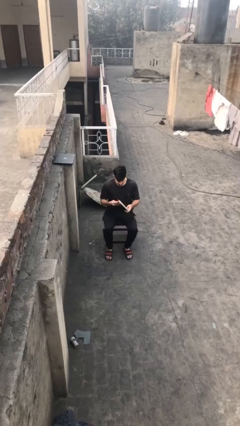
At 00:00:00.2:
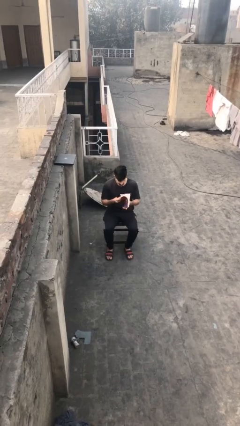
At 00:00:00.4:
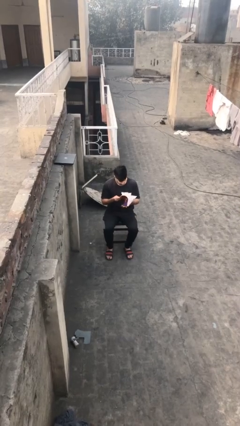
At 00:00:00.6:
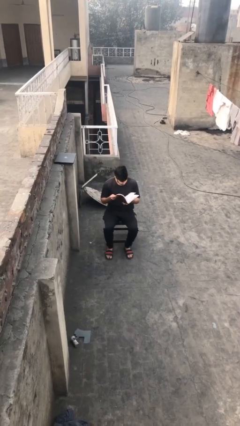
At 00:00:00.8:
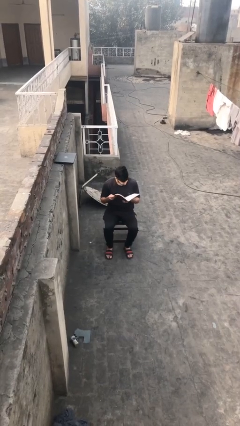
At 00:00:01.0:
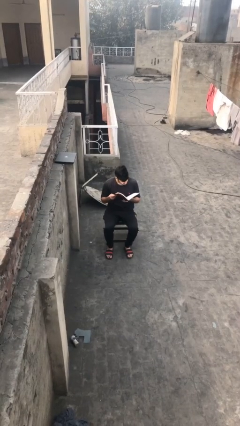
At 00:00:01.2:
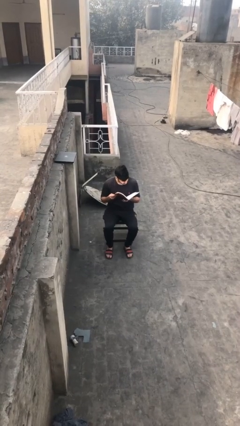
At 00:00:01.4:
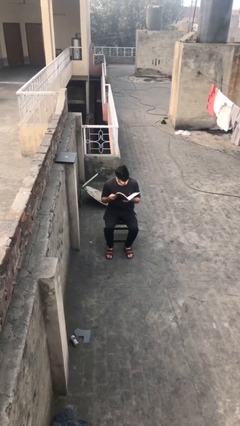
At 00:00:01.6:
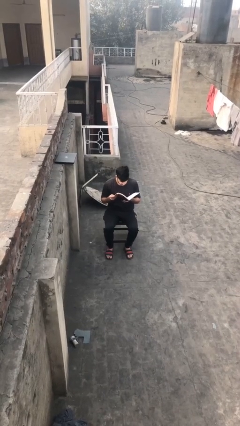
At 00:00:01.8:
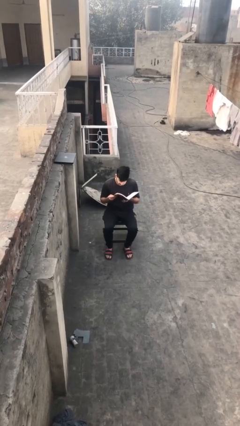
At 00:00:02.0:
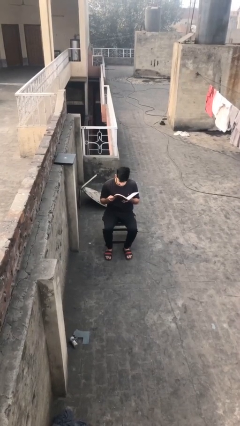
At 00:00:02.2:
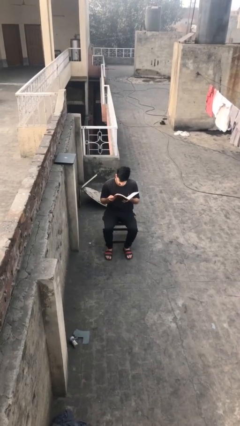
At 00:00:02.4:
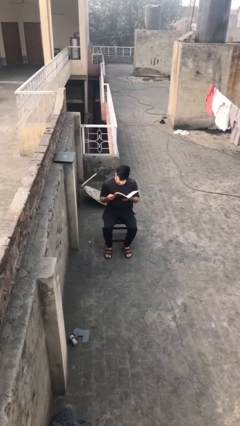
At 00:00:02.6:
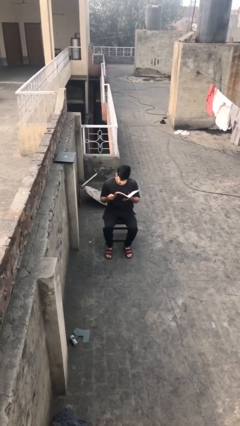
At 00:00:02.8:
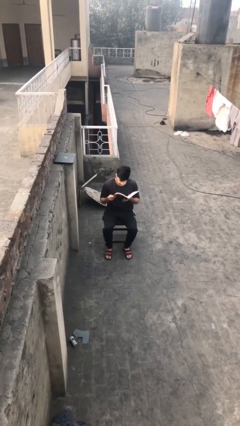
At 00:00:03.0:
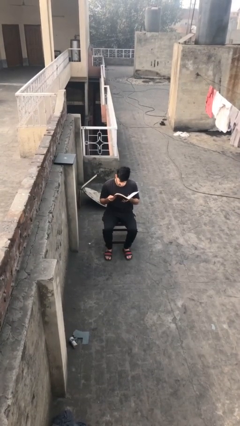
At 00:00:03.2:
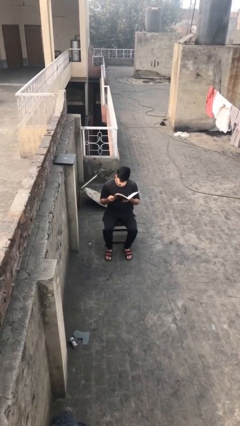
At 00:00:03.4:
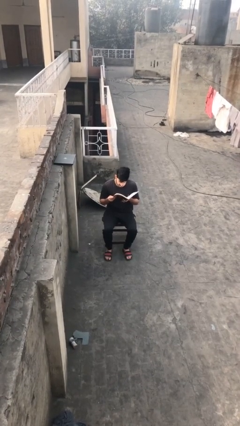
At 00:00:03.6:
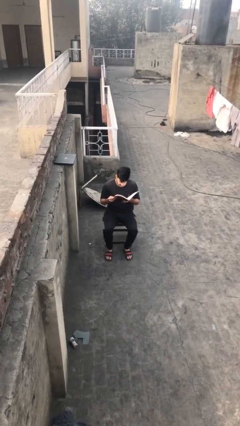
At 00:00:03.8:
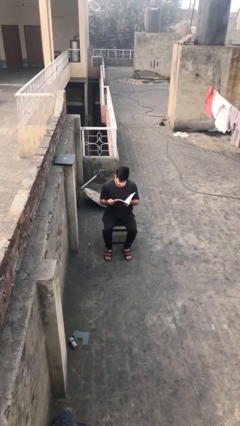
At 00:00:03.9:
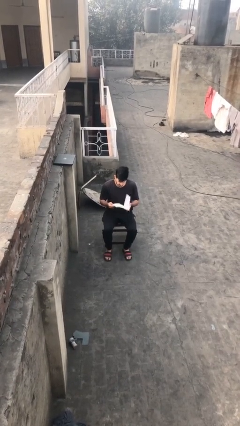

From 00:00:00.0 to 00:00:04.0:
person reads document

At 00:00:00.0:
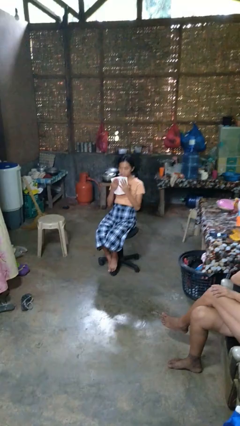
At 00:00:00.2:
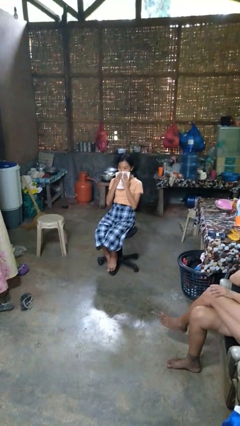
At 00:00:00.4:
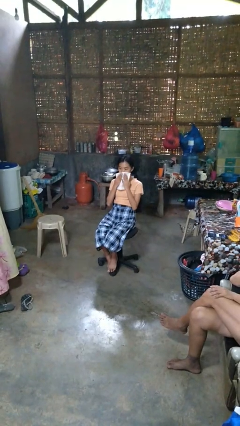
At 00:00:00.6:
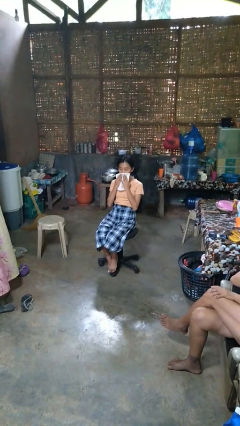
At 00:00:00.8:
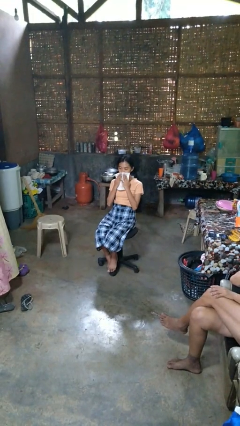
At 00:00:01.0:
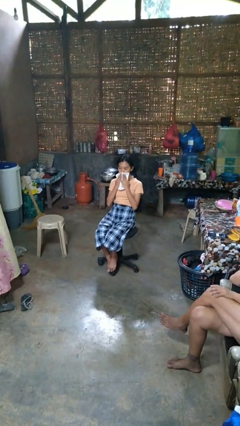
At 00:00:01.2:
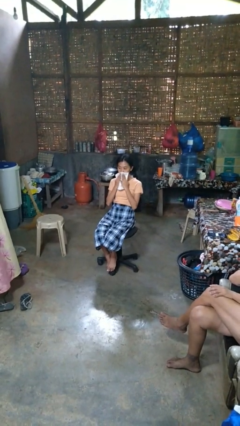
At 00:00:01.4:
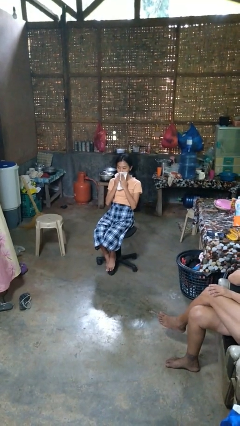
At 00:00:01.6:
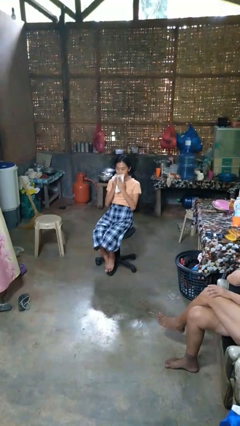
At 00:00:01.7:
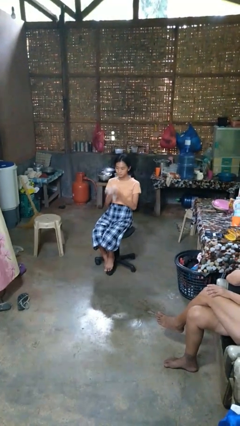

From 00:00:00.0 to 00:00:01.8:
person wipes mouth with napkin

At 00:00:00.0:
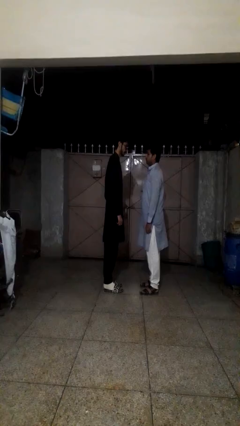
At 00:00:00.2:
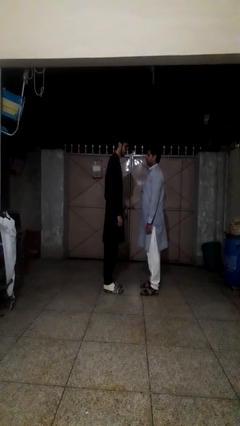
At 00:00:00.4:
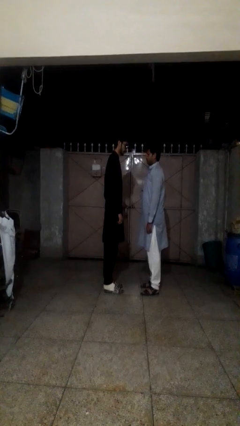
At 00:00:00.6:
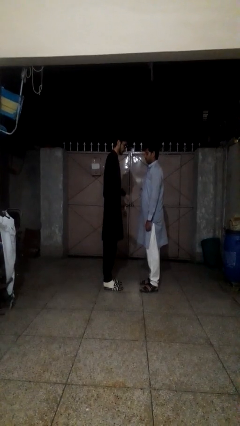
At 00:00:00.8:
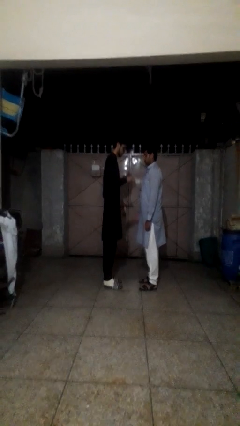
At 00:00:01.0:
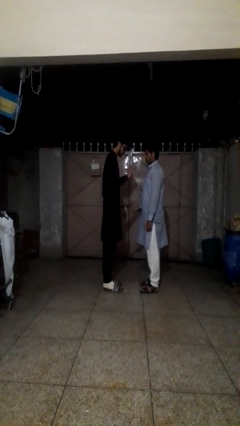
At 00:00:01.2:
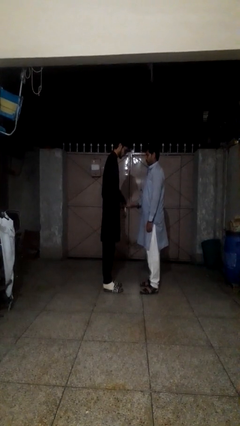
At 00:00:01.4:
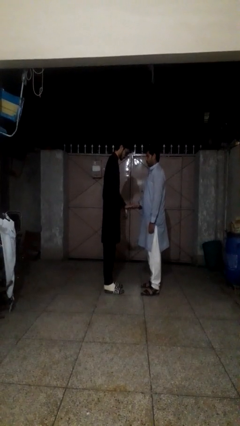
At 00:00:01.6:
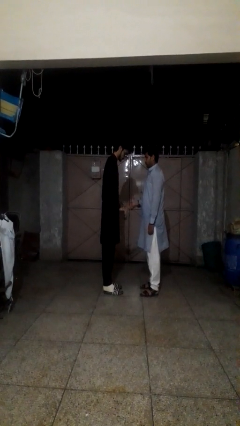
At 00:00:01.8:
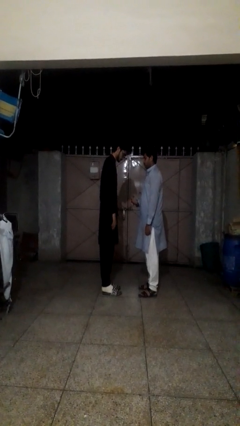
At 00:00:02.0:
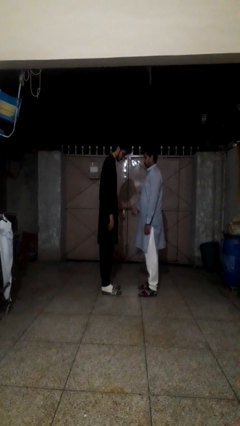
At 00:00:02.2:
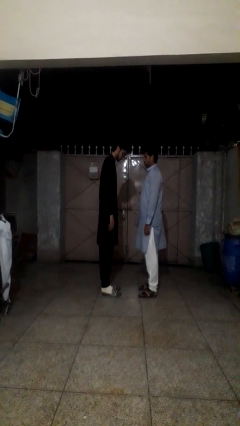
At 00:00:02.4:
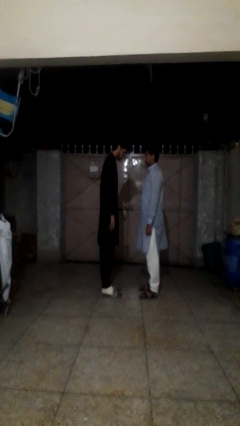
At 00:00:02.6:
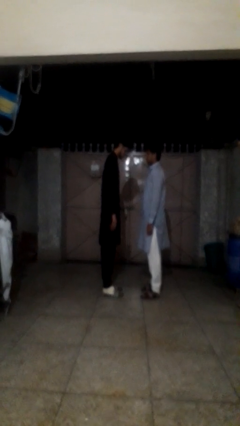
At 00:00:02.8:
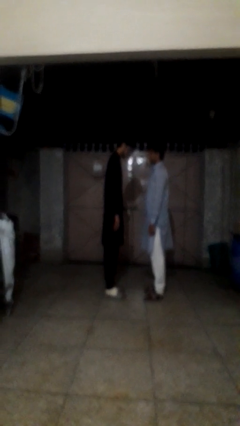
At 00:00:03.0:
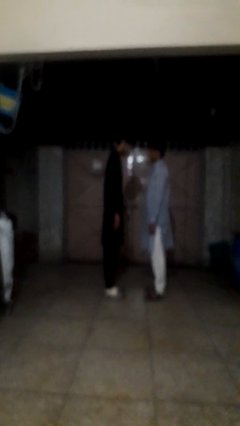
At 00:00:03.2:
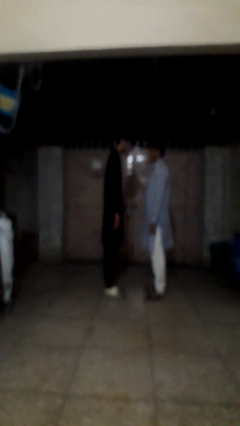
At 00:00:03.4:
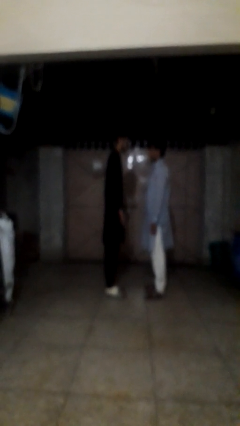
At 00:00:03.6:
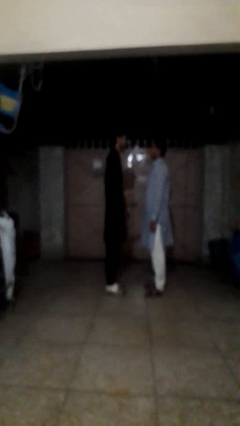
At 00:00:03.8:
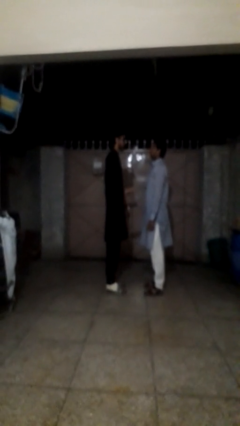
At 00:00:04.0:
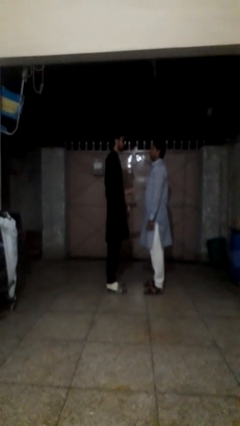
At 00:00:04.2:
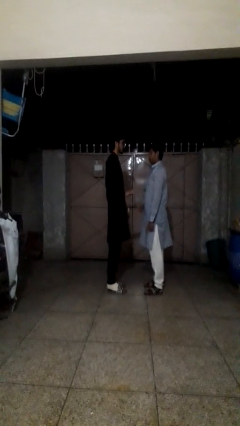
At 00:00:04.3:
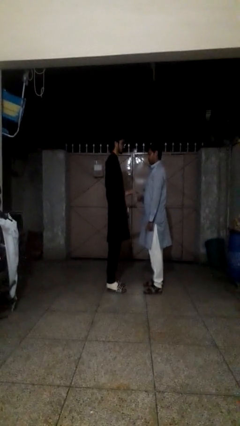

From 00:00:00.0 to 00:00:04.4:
person highfives hand

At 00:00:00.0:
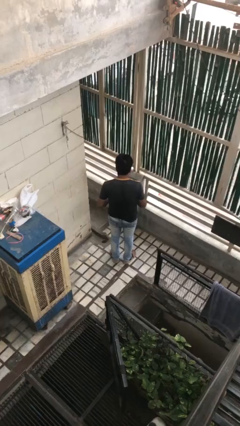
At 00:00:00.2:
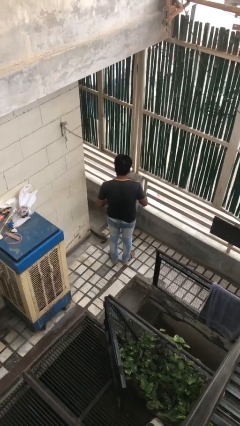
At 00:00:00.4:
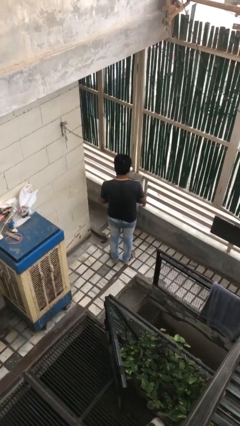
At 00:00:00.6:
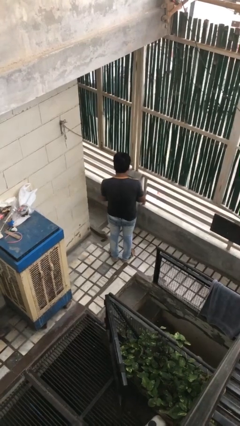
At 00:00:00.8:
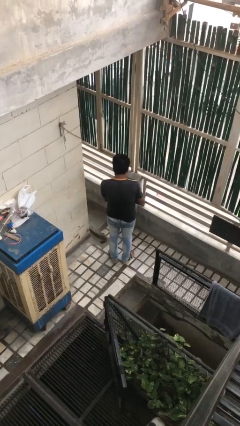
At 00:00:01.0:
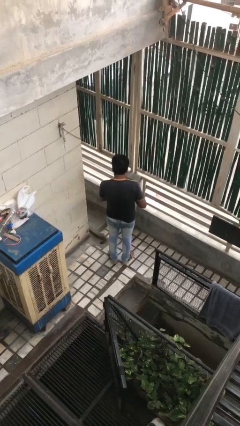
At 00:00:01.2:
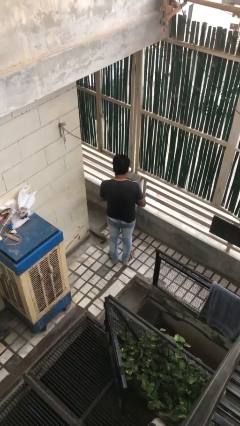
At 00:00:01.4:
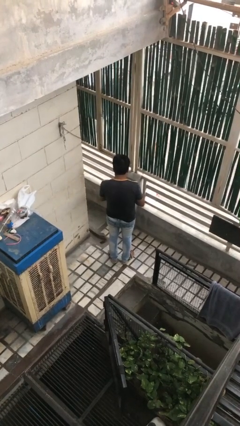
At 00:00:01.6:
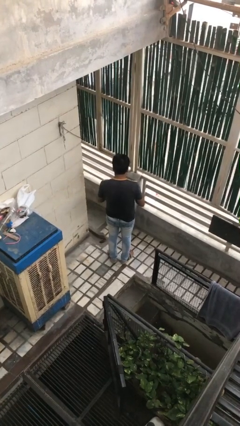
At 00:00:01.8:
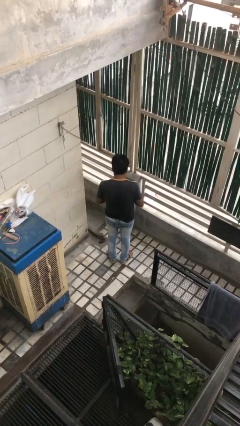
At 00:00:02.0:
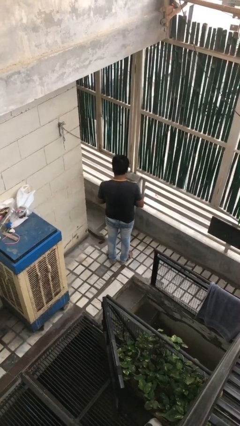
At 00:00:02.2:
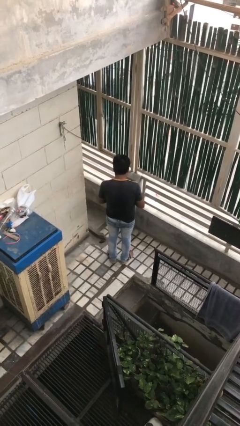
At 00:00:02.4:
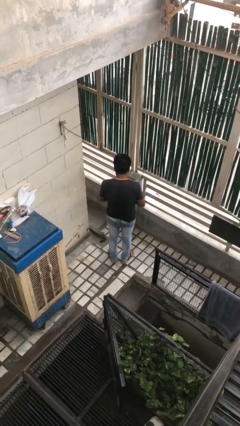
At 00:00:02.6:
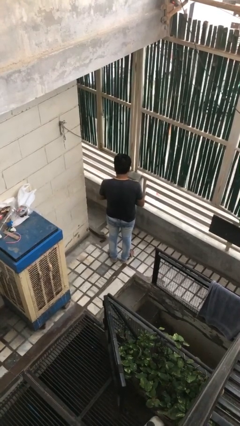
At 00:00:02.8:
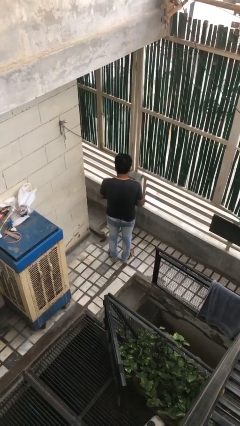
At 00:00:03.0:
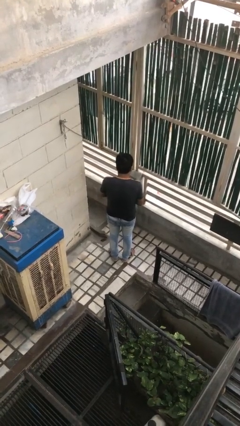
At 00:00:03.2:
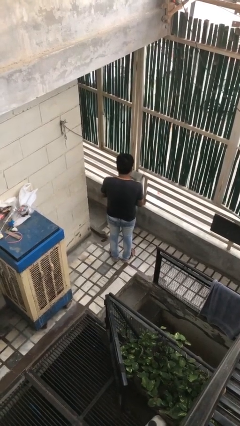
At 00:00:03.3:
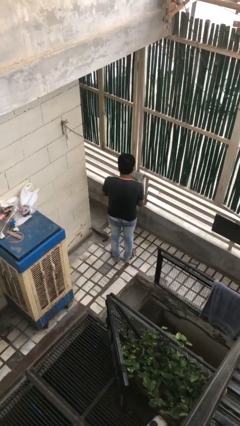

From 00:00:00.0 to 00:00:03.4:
person takes off gloves

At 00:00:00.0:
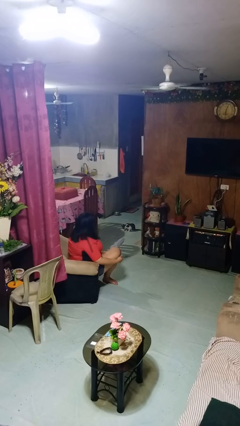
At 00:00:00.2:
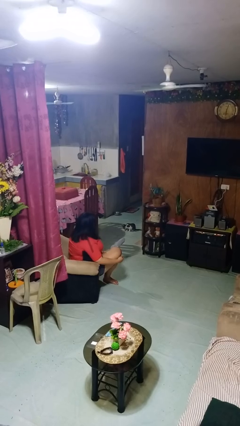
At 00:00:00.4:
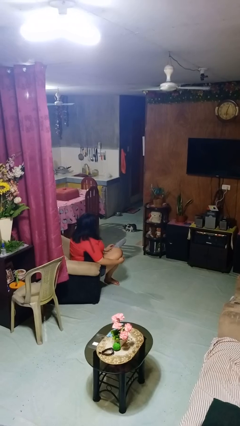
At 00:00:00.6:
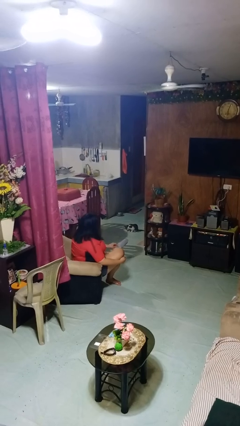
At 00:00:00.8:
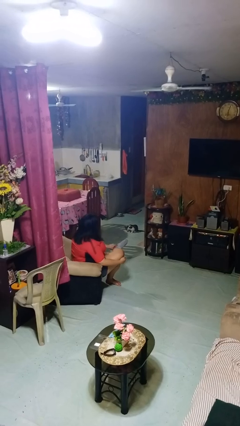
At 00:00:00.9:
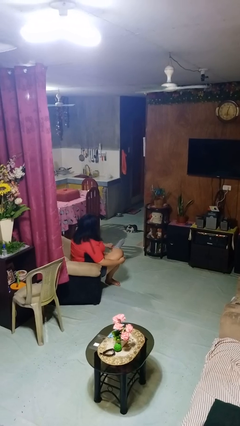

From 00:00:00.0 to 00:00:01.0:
person takes off socks

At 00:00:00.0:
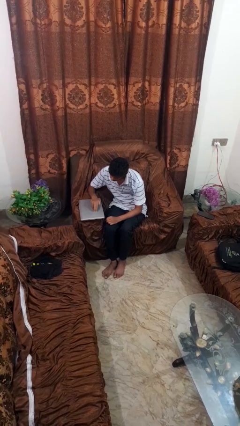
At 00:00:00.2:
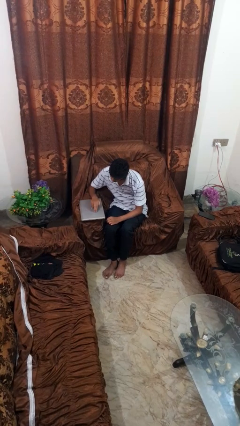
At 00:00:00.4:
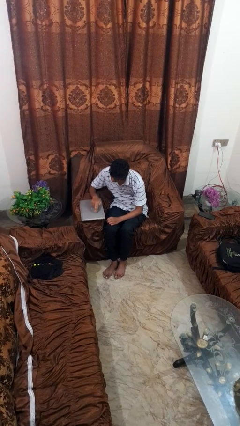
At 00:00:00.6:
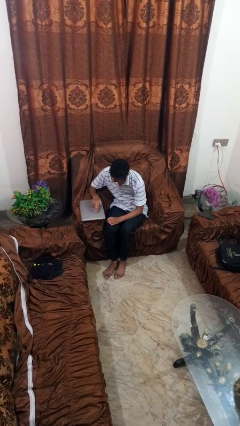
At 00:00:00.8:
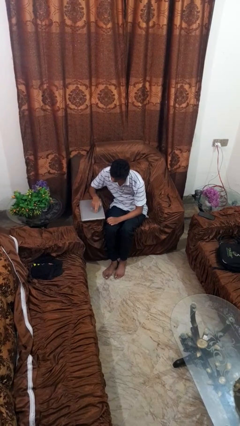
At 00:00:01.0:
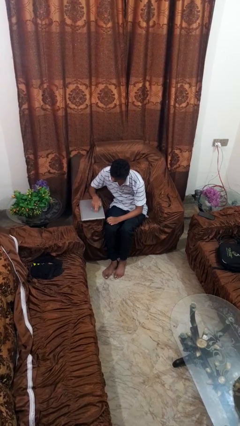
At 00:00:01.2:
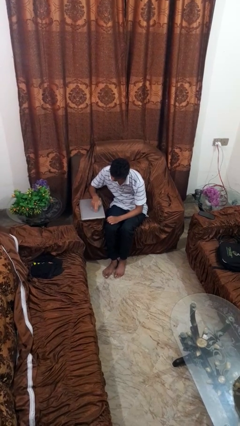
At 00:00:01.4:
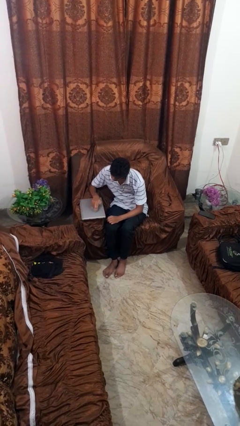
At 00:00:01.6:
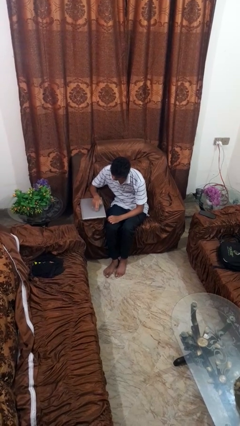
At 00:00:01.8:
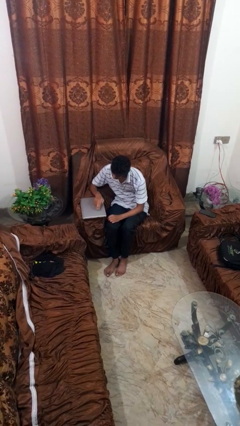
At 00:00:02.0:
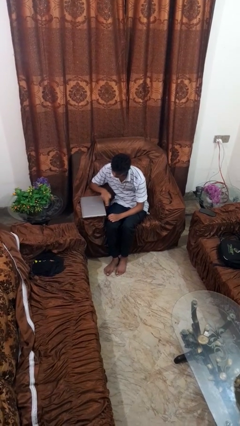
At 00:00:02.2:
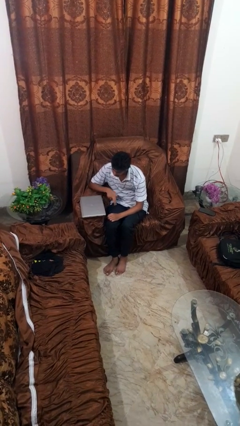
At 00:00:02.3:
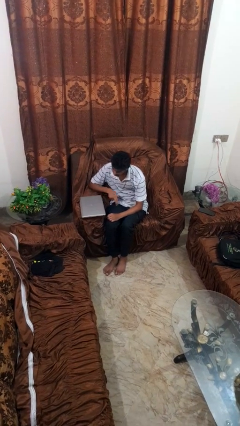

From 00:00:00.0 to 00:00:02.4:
person taps object with finger
